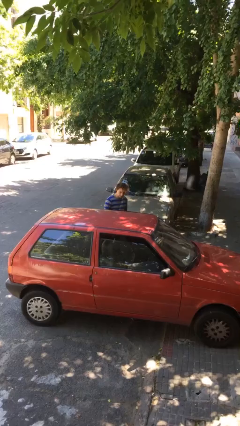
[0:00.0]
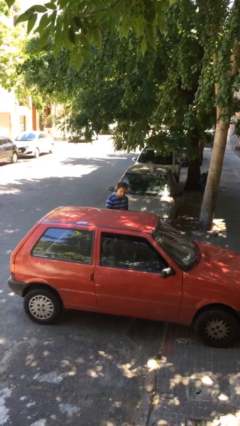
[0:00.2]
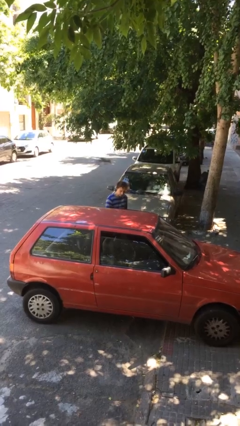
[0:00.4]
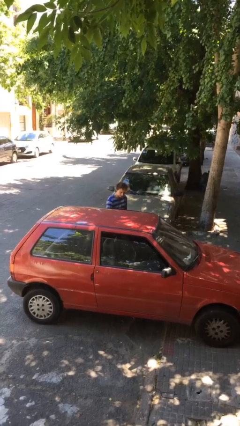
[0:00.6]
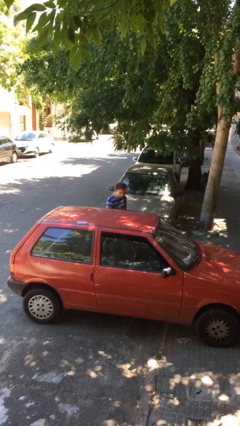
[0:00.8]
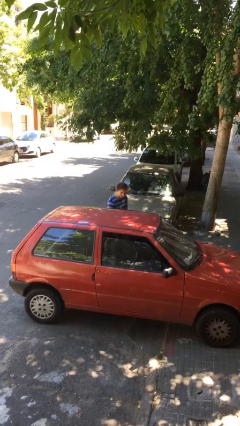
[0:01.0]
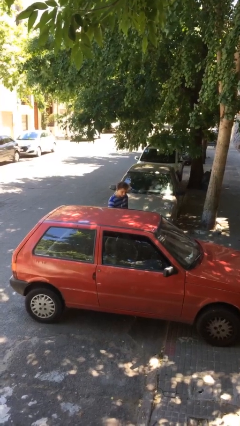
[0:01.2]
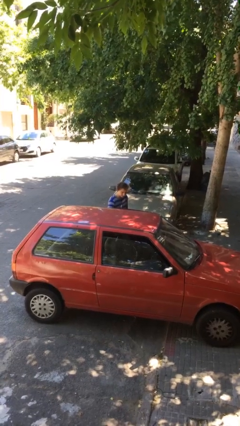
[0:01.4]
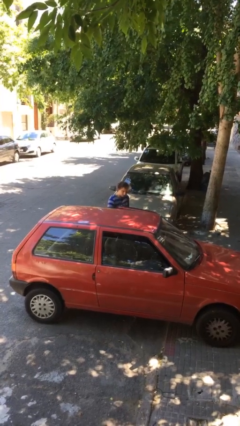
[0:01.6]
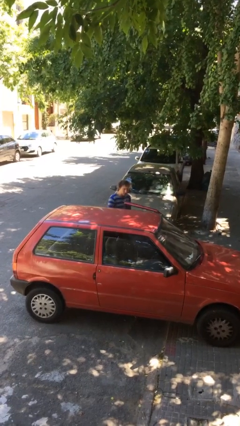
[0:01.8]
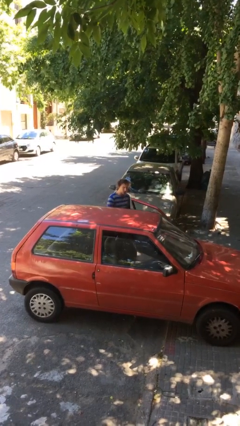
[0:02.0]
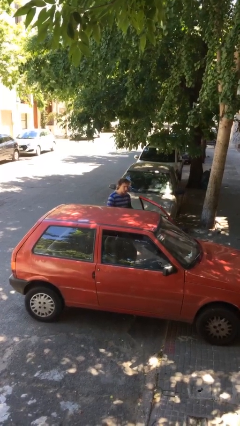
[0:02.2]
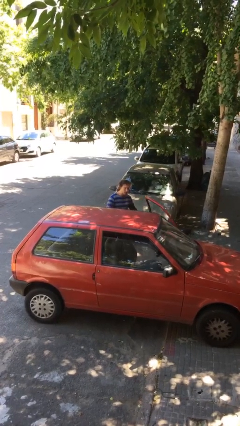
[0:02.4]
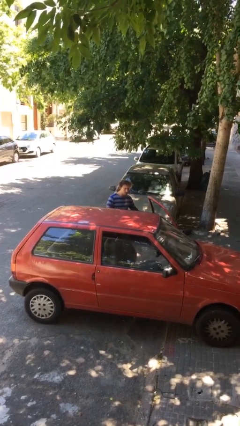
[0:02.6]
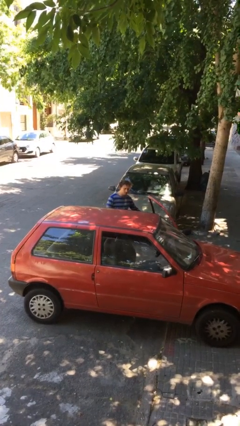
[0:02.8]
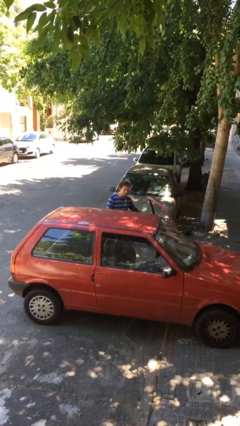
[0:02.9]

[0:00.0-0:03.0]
person opens car door

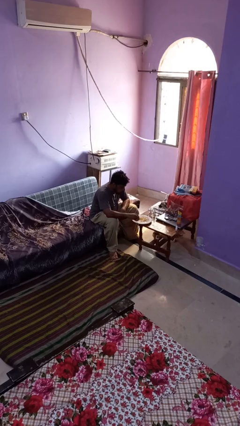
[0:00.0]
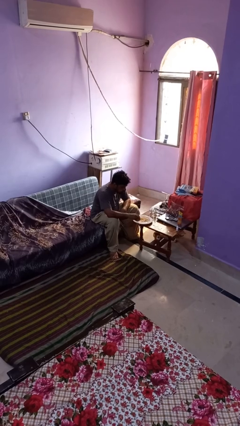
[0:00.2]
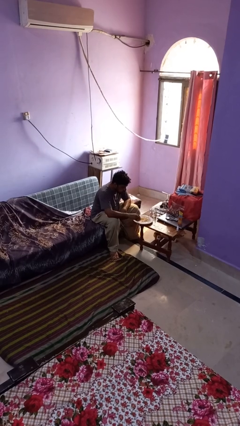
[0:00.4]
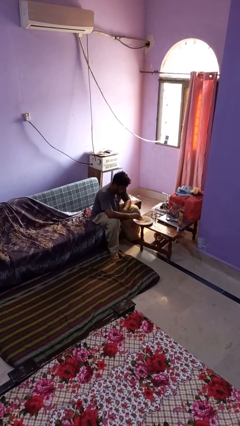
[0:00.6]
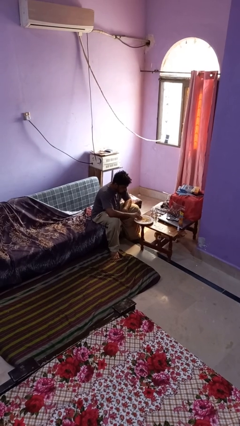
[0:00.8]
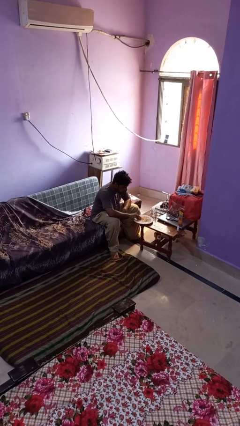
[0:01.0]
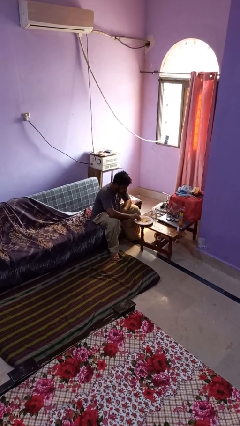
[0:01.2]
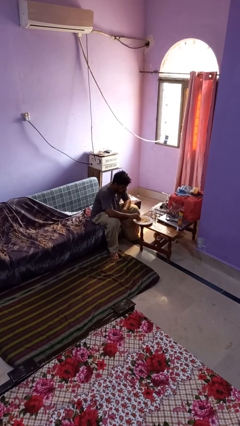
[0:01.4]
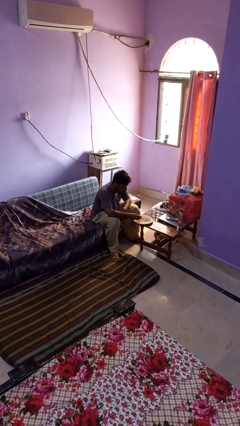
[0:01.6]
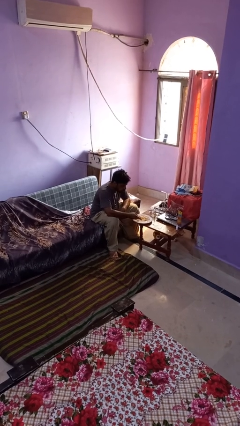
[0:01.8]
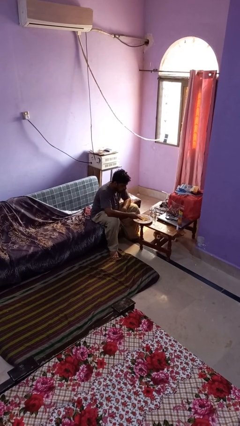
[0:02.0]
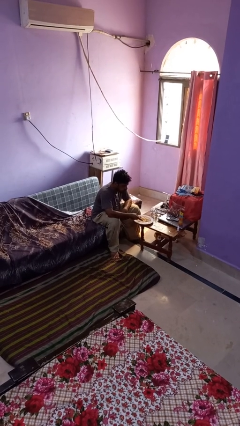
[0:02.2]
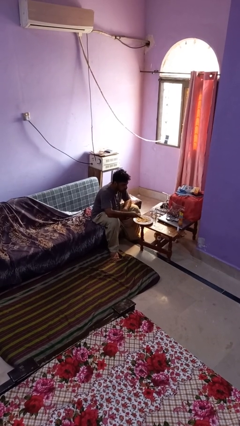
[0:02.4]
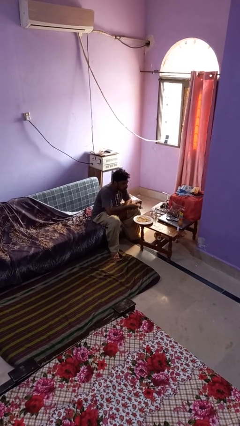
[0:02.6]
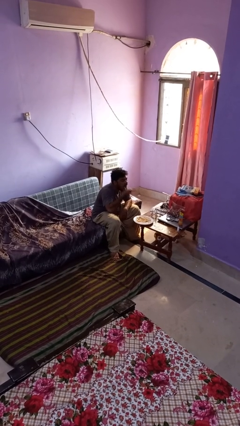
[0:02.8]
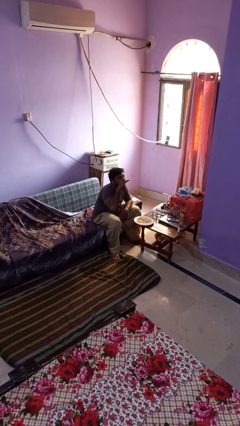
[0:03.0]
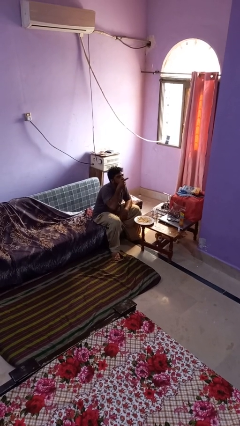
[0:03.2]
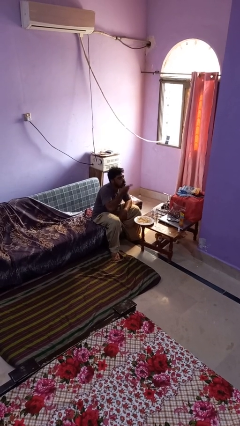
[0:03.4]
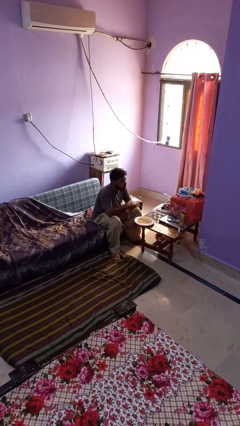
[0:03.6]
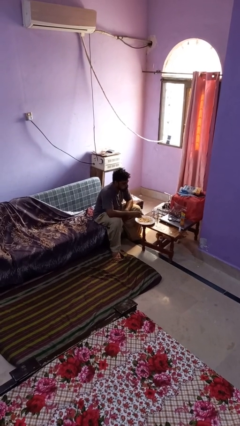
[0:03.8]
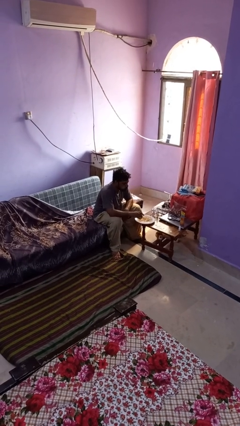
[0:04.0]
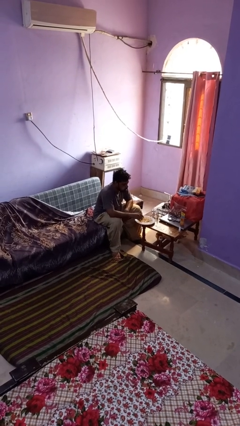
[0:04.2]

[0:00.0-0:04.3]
person eats with hands

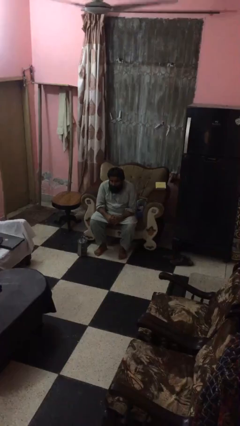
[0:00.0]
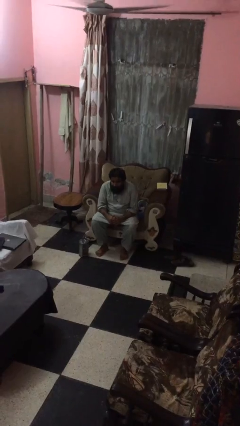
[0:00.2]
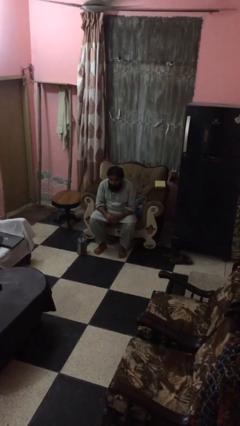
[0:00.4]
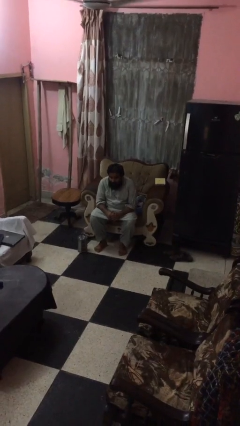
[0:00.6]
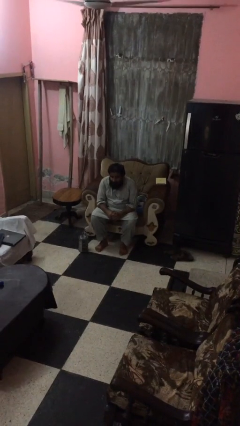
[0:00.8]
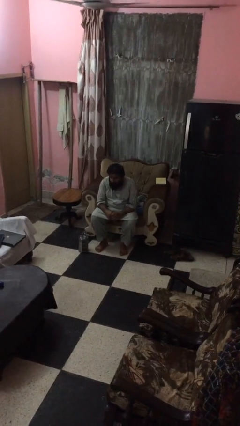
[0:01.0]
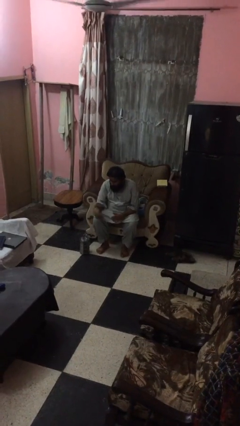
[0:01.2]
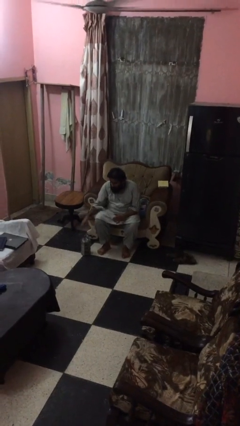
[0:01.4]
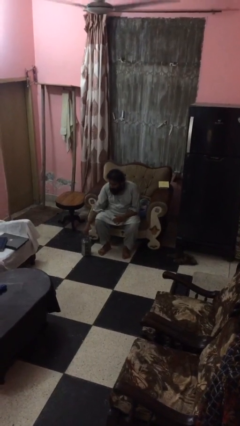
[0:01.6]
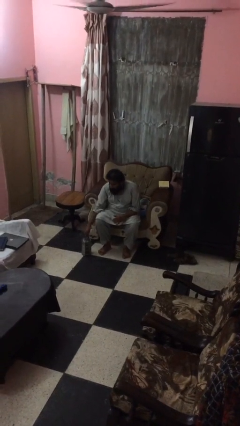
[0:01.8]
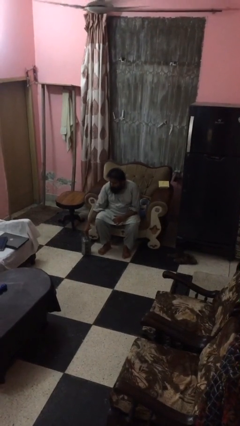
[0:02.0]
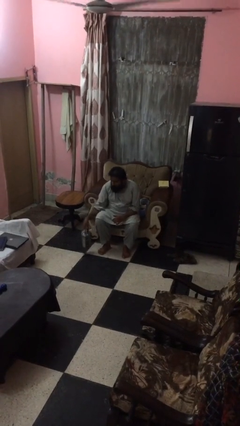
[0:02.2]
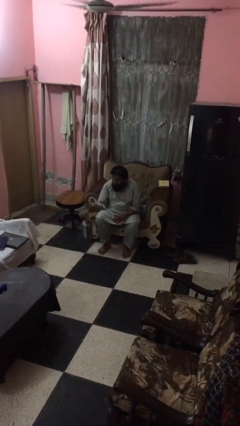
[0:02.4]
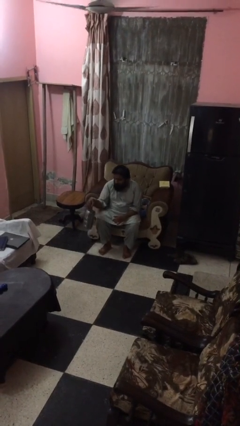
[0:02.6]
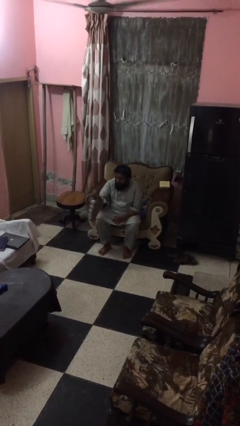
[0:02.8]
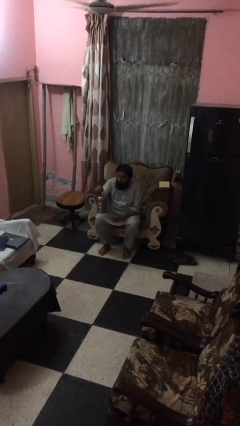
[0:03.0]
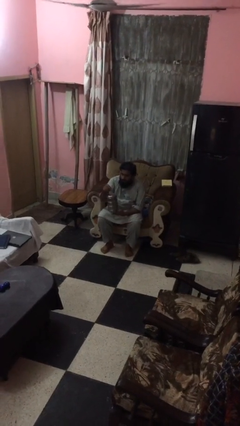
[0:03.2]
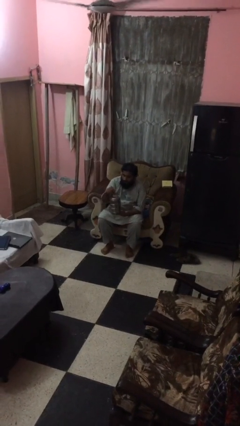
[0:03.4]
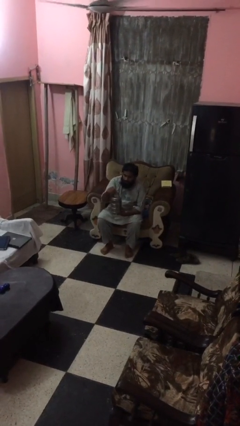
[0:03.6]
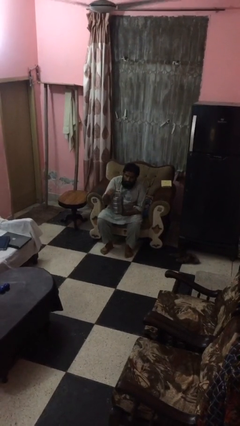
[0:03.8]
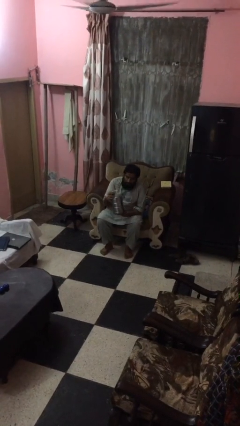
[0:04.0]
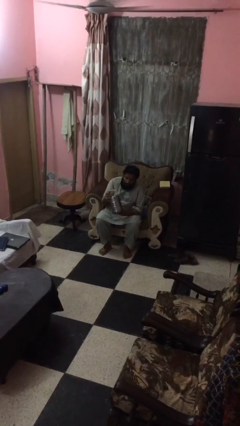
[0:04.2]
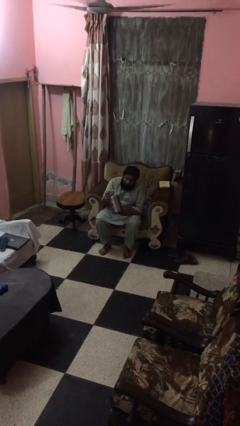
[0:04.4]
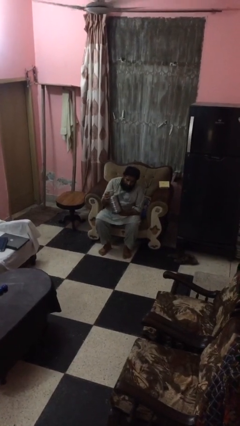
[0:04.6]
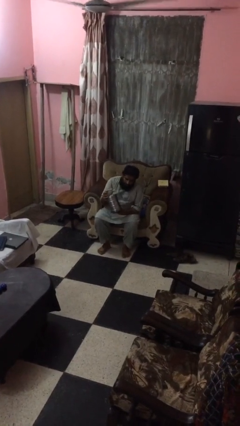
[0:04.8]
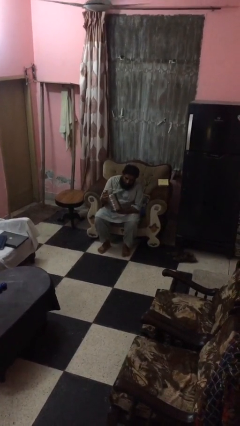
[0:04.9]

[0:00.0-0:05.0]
person picks up object from floor

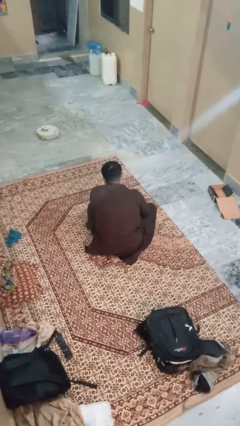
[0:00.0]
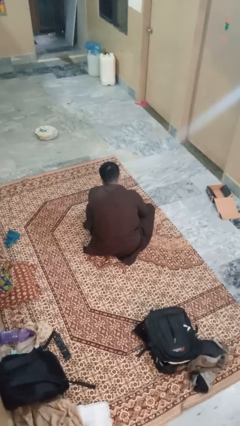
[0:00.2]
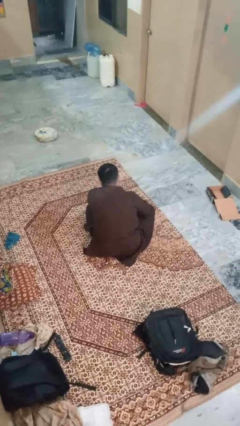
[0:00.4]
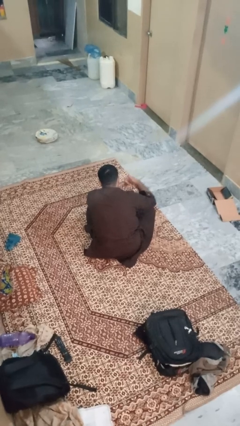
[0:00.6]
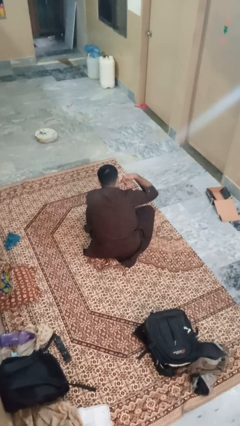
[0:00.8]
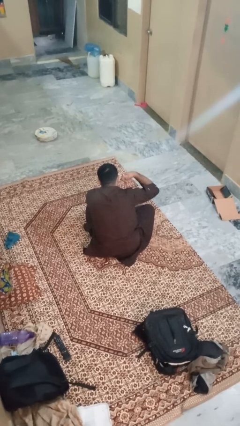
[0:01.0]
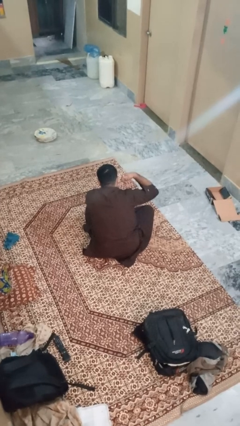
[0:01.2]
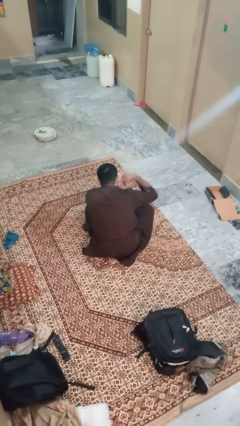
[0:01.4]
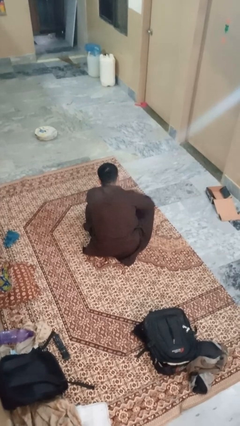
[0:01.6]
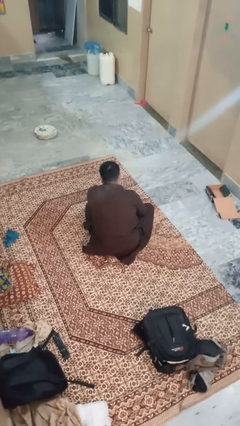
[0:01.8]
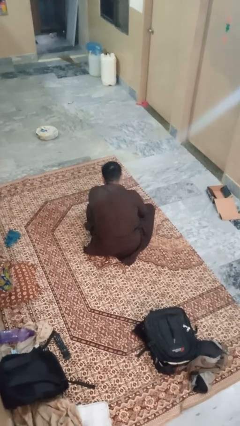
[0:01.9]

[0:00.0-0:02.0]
person gestures call me

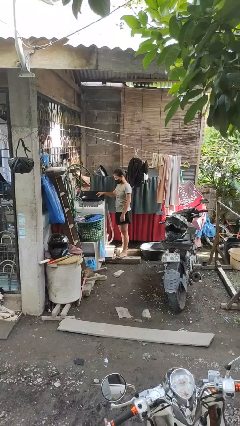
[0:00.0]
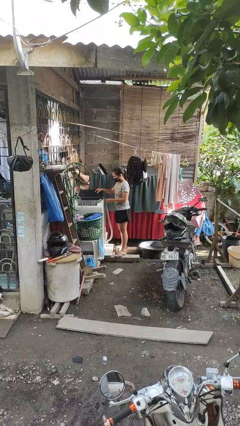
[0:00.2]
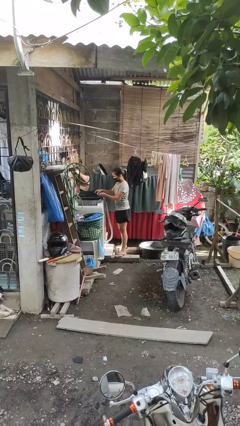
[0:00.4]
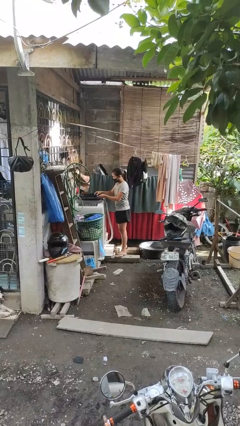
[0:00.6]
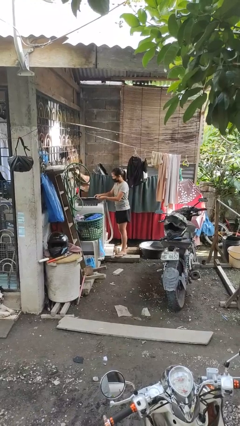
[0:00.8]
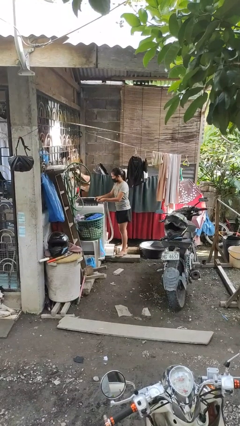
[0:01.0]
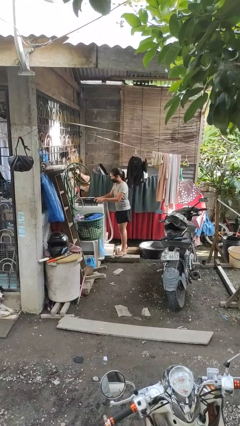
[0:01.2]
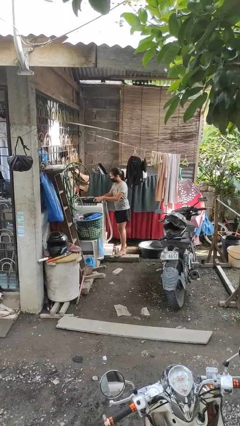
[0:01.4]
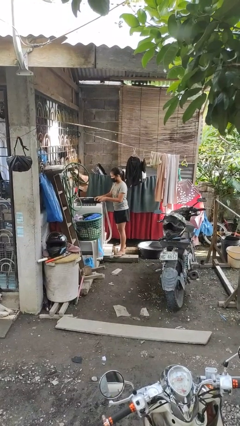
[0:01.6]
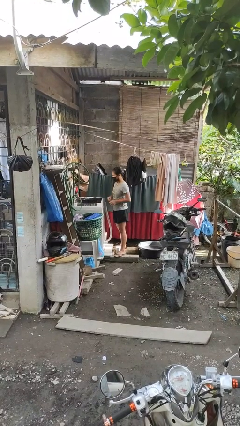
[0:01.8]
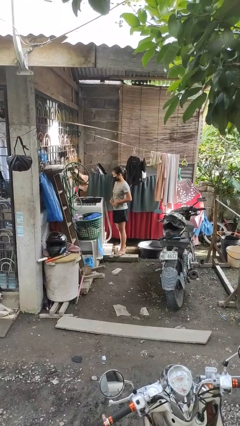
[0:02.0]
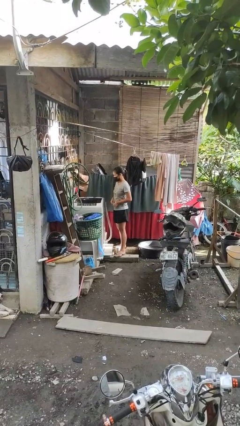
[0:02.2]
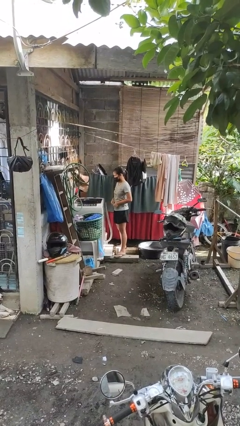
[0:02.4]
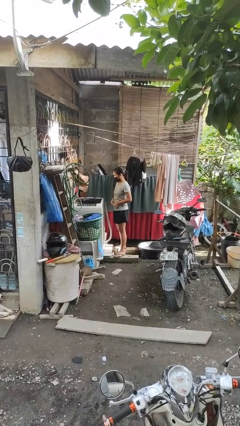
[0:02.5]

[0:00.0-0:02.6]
person closes clothes washer

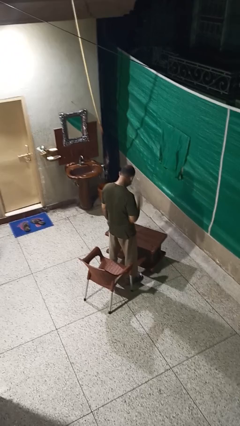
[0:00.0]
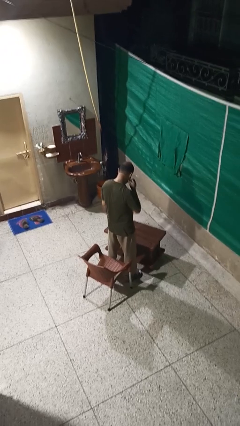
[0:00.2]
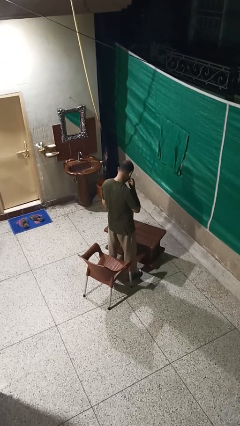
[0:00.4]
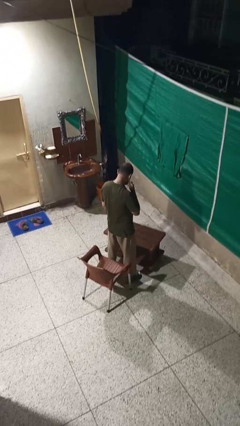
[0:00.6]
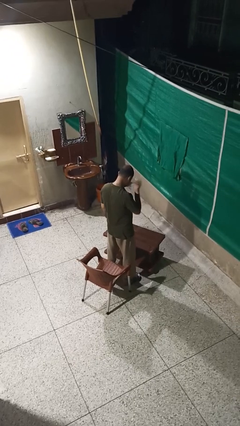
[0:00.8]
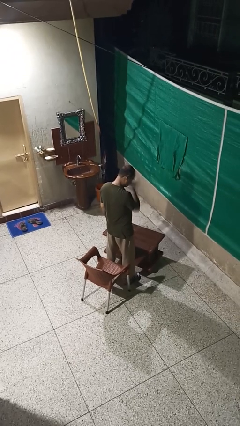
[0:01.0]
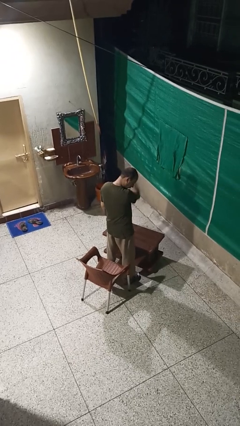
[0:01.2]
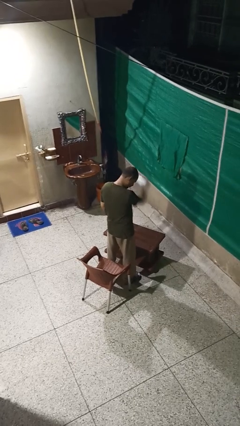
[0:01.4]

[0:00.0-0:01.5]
person takes off facemask
